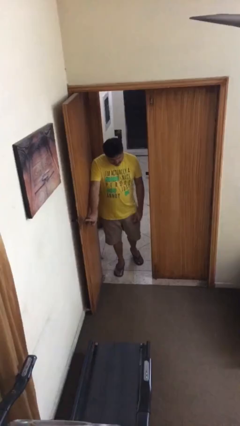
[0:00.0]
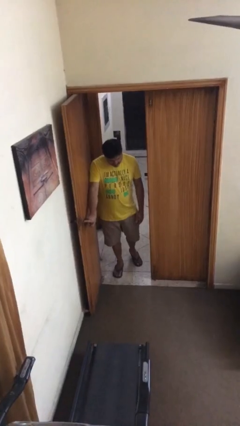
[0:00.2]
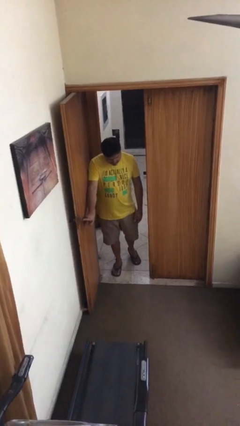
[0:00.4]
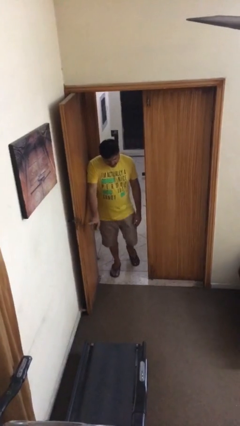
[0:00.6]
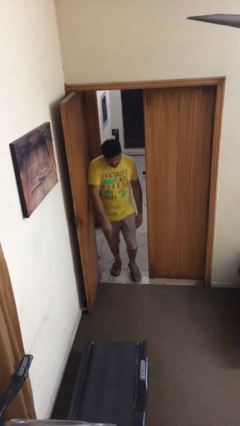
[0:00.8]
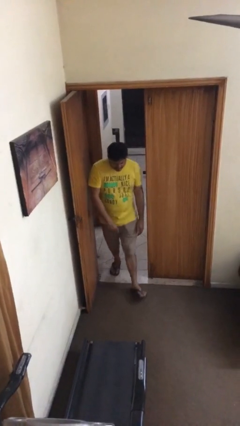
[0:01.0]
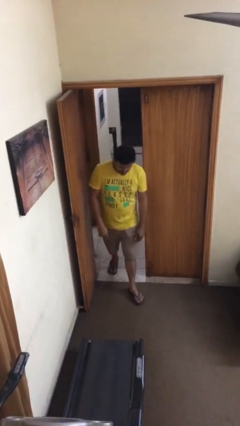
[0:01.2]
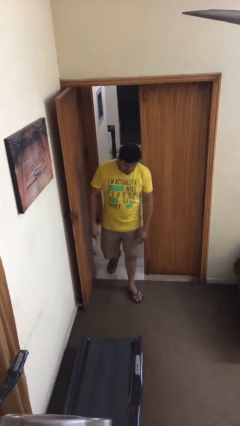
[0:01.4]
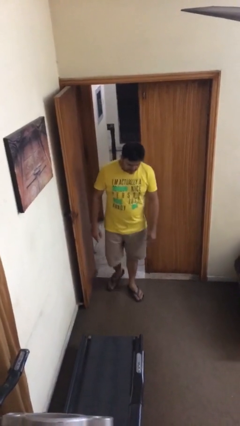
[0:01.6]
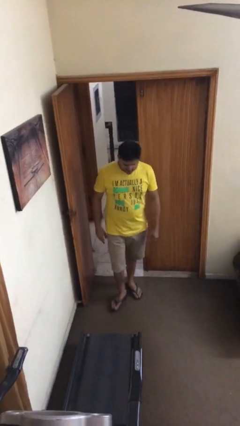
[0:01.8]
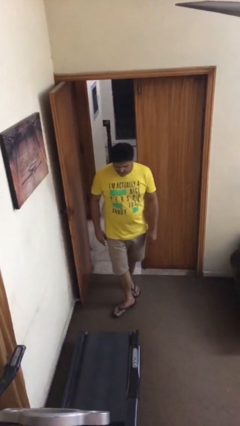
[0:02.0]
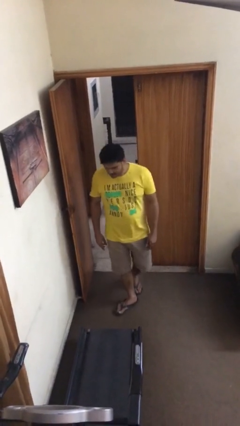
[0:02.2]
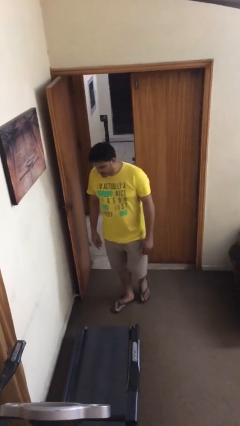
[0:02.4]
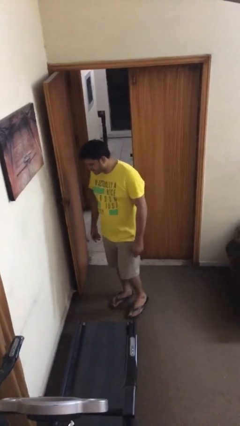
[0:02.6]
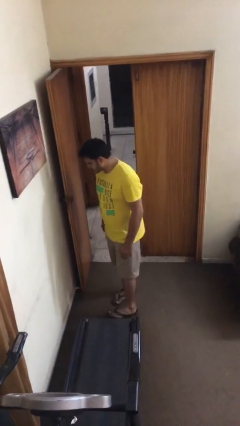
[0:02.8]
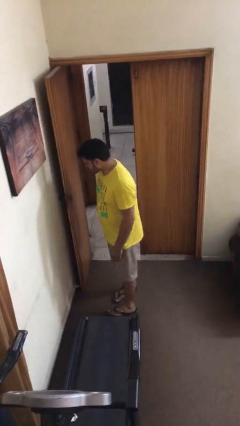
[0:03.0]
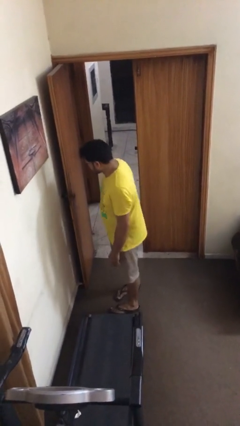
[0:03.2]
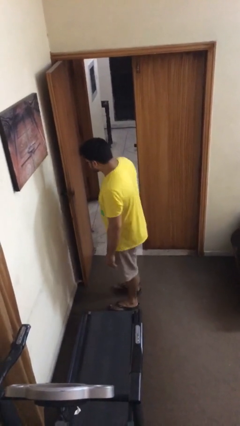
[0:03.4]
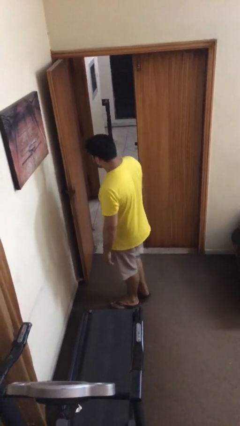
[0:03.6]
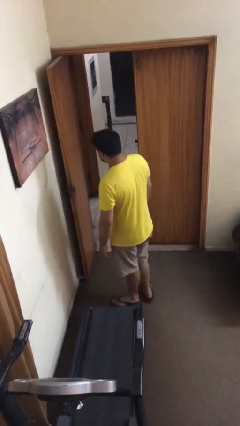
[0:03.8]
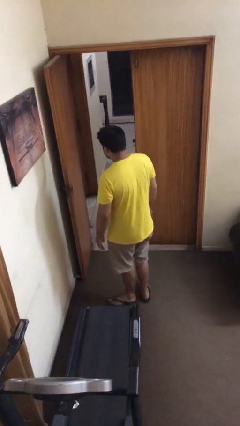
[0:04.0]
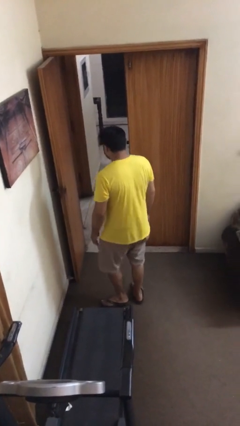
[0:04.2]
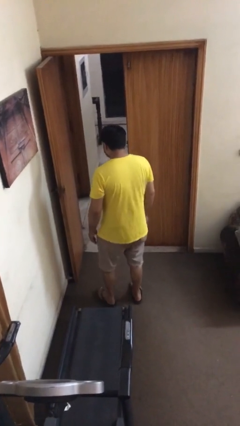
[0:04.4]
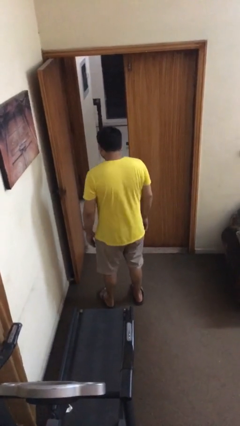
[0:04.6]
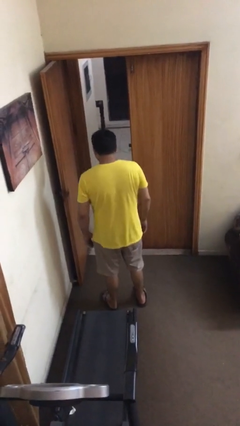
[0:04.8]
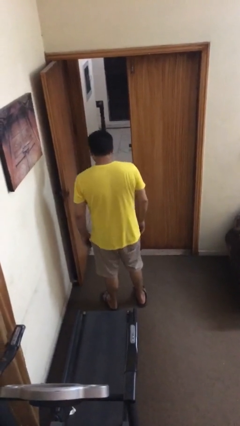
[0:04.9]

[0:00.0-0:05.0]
person enters scene through structure

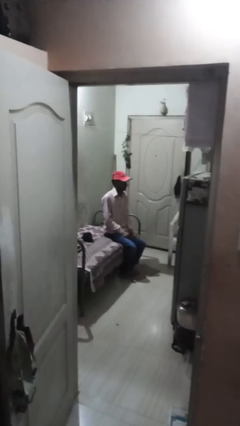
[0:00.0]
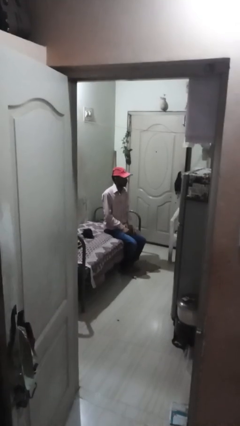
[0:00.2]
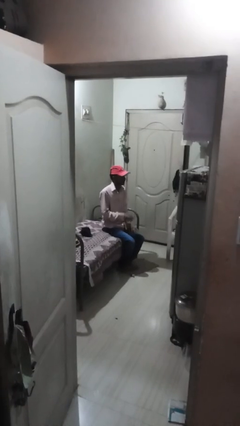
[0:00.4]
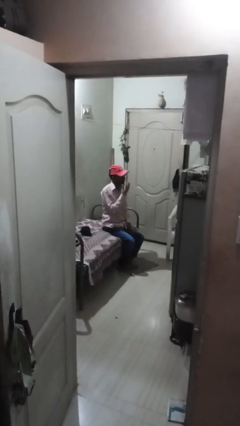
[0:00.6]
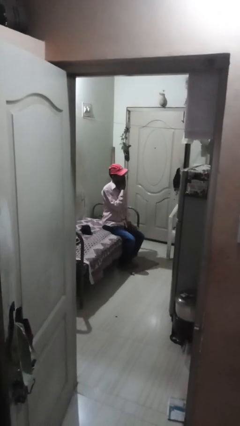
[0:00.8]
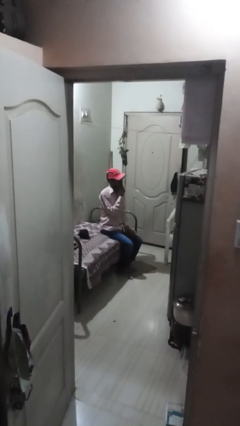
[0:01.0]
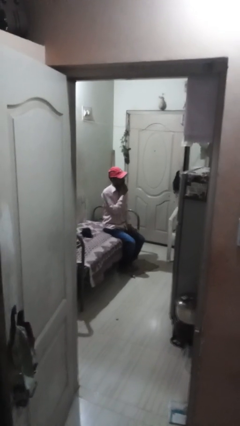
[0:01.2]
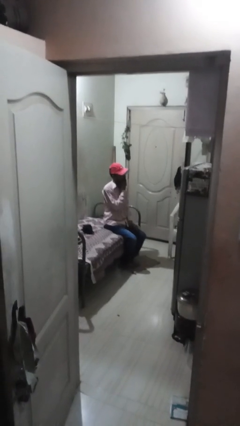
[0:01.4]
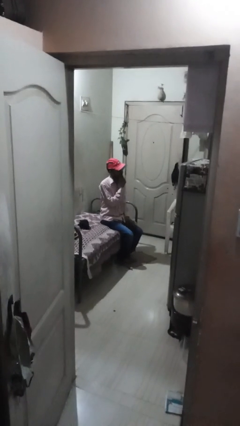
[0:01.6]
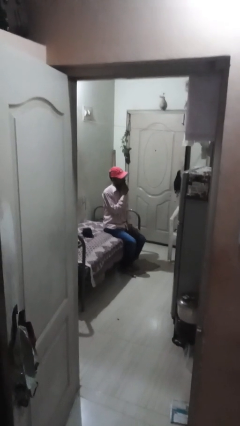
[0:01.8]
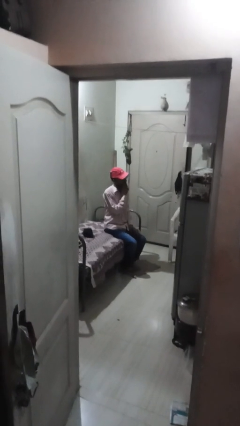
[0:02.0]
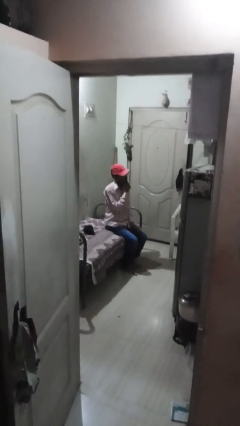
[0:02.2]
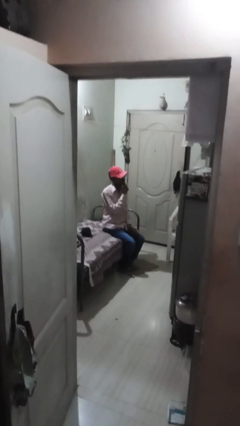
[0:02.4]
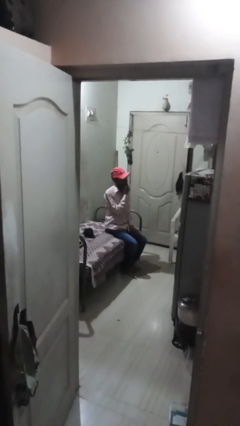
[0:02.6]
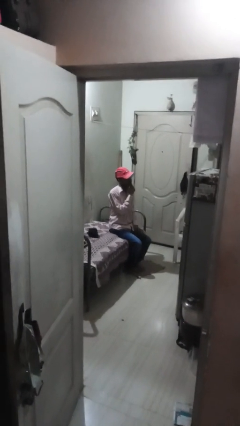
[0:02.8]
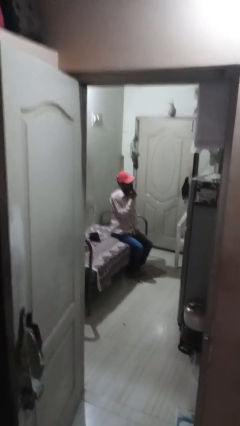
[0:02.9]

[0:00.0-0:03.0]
person strokes chin

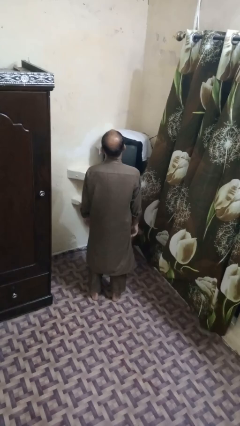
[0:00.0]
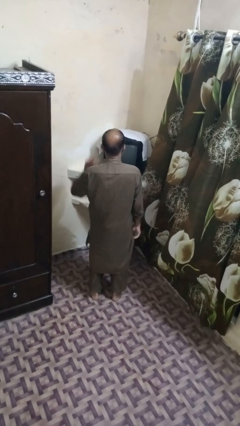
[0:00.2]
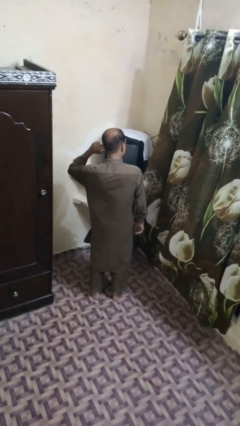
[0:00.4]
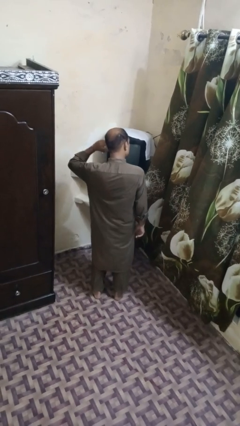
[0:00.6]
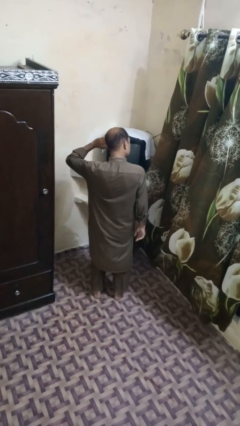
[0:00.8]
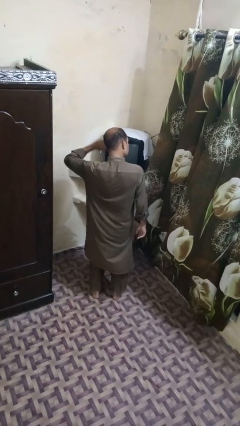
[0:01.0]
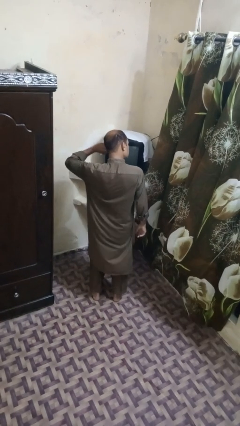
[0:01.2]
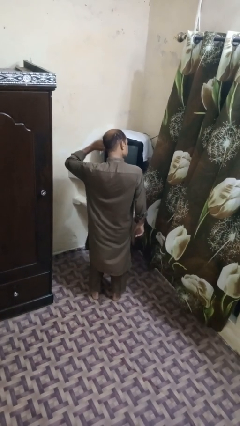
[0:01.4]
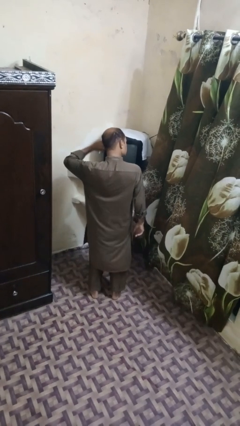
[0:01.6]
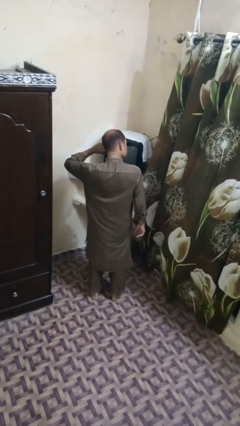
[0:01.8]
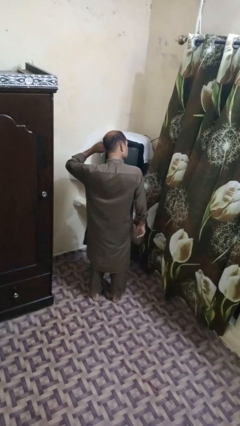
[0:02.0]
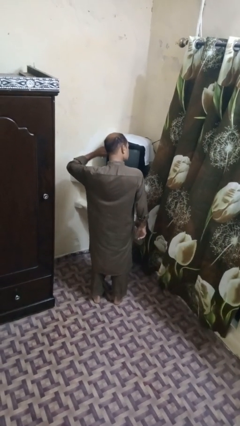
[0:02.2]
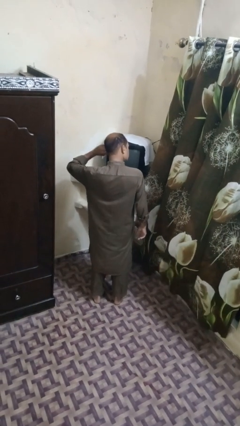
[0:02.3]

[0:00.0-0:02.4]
person puts fingers in ear

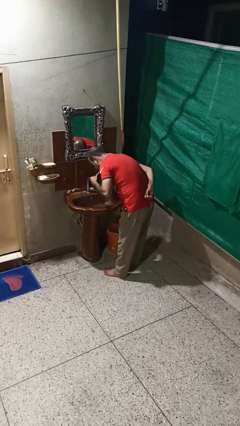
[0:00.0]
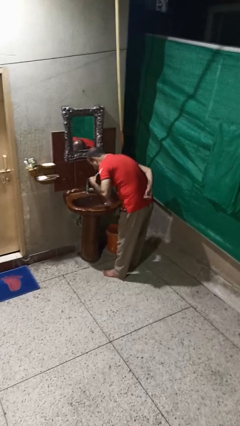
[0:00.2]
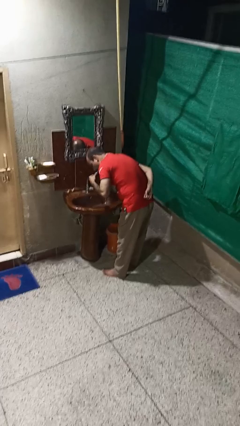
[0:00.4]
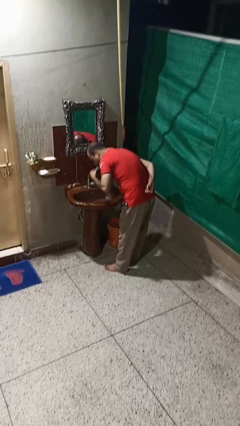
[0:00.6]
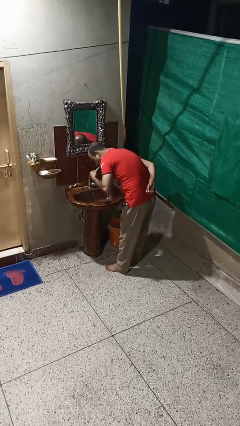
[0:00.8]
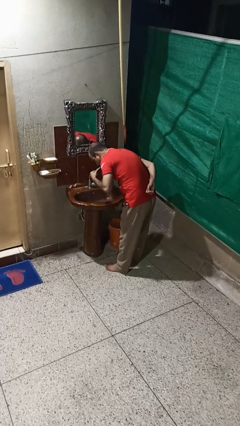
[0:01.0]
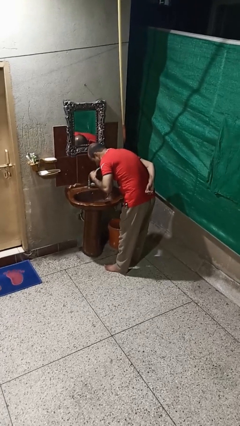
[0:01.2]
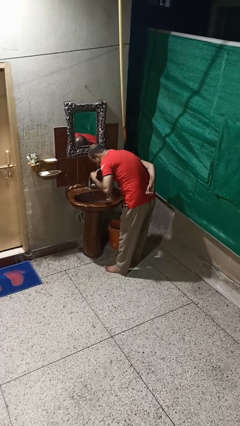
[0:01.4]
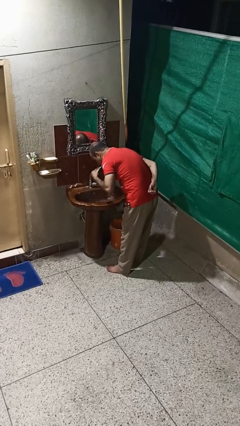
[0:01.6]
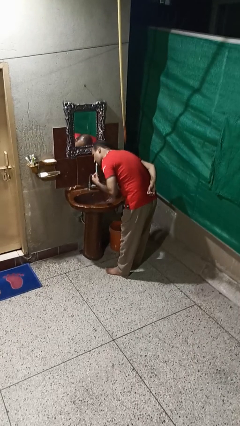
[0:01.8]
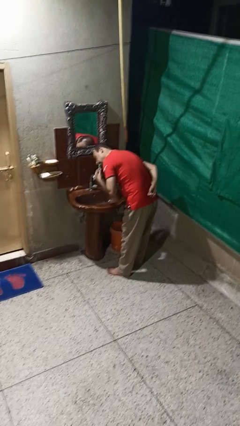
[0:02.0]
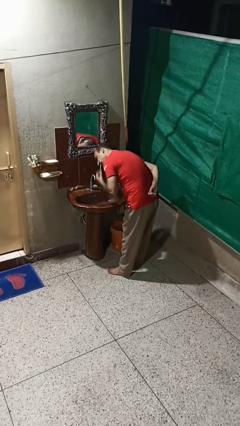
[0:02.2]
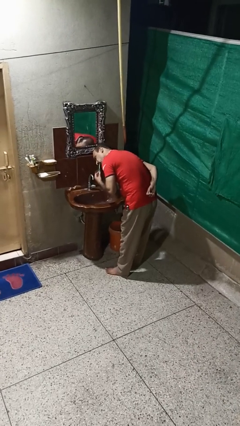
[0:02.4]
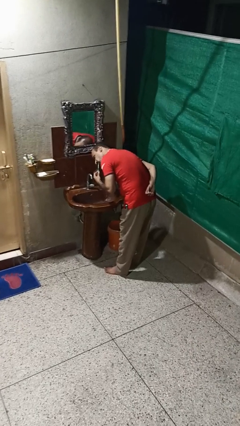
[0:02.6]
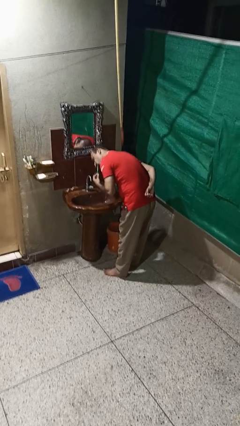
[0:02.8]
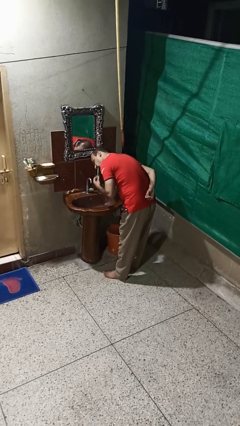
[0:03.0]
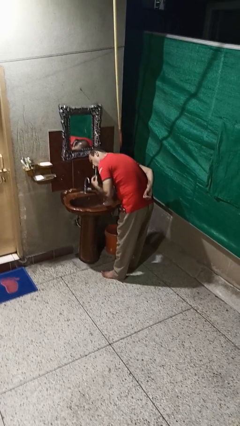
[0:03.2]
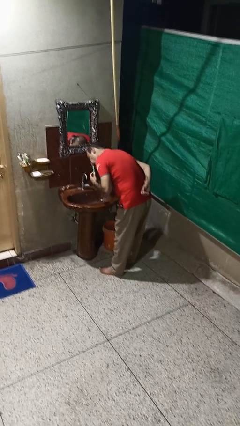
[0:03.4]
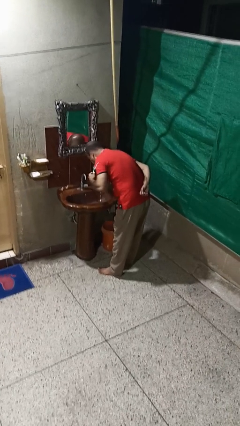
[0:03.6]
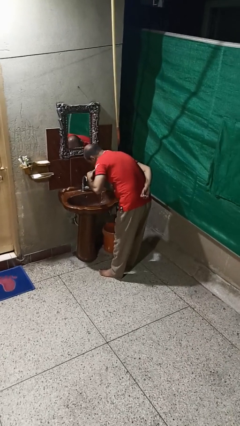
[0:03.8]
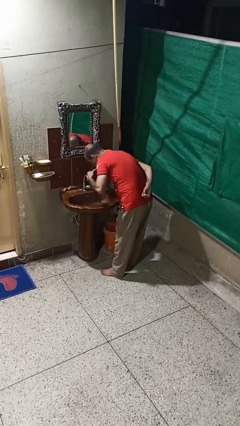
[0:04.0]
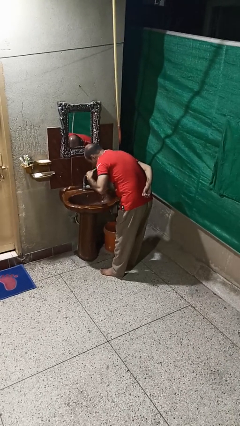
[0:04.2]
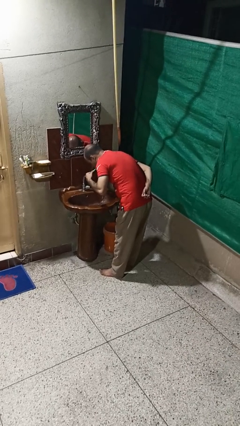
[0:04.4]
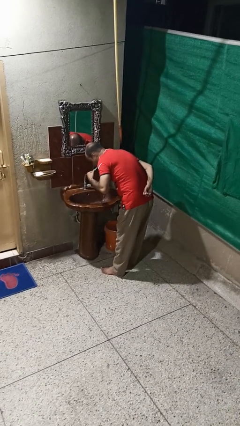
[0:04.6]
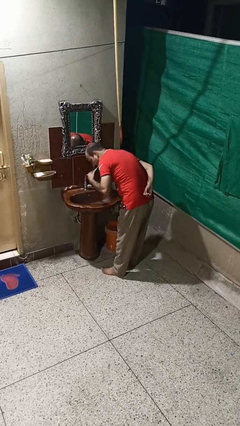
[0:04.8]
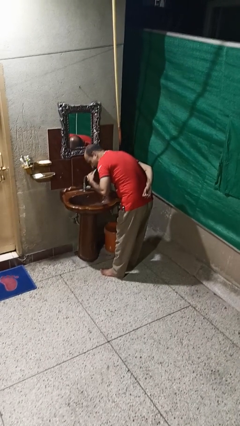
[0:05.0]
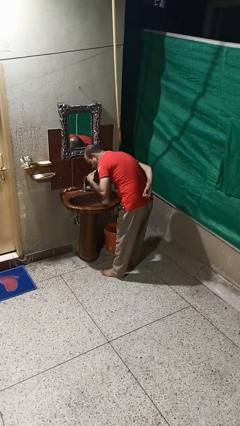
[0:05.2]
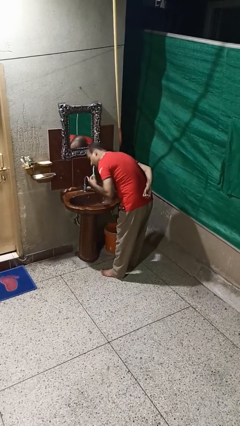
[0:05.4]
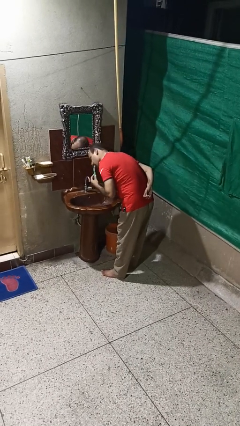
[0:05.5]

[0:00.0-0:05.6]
person brushes teeth

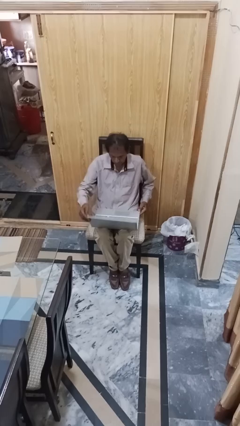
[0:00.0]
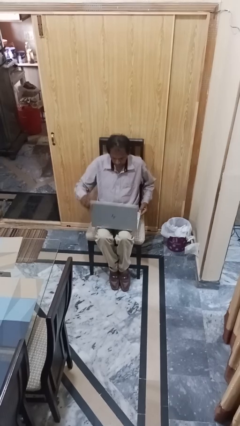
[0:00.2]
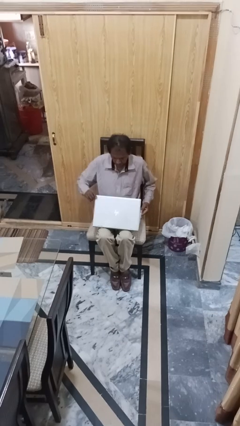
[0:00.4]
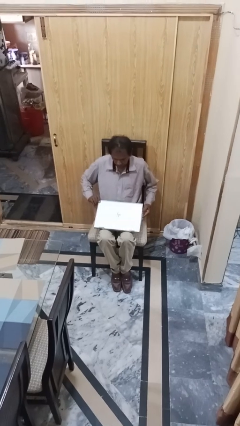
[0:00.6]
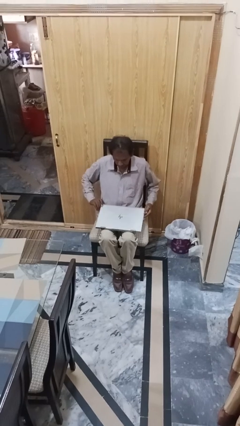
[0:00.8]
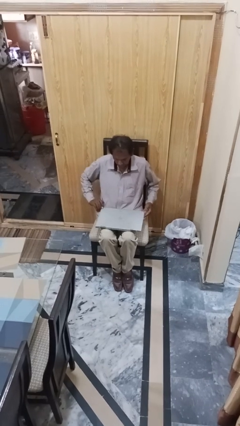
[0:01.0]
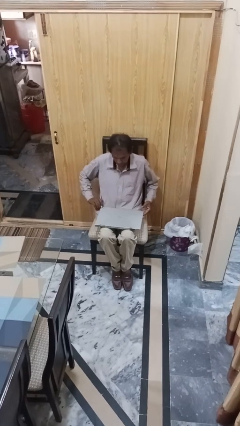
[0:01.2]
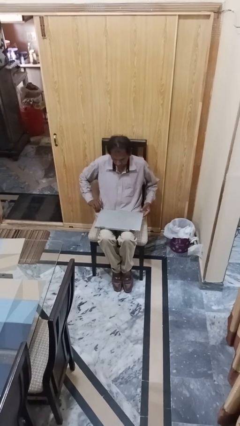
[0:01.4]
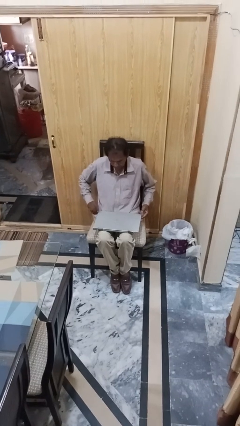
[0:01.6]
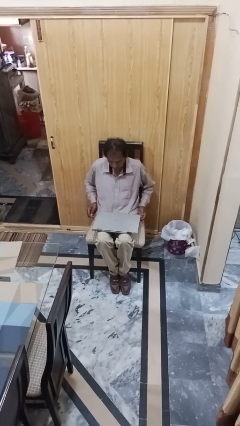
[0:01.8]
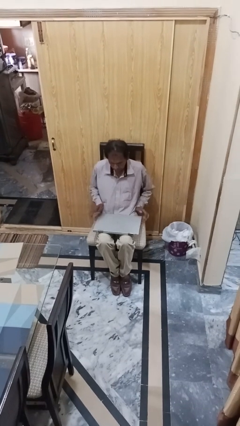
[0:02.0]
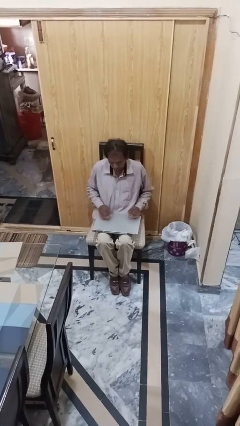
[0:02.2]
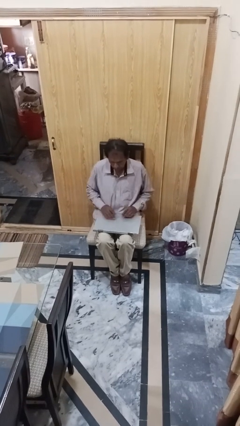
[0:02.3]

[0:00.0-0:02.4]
person closes laptop
